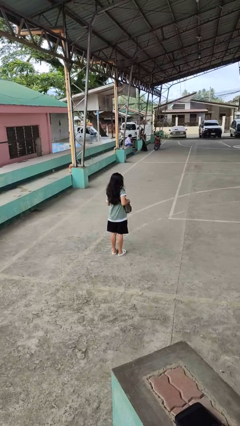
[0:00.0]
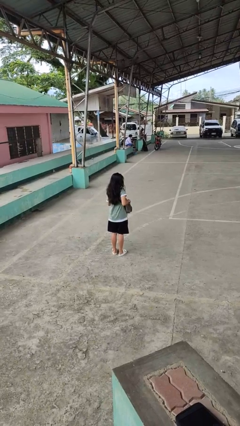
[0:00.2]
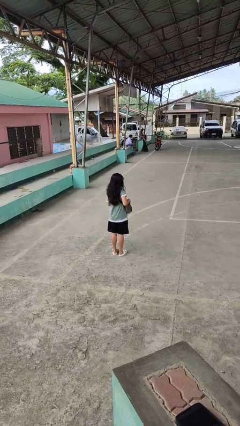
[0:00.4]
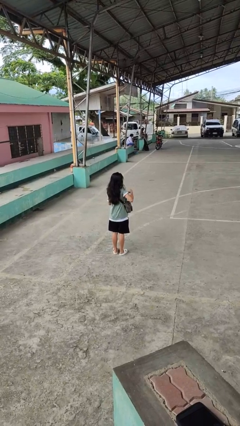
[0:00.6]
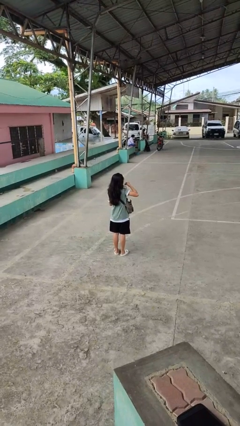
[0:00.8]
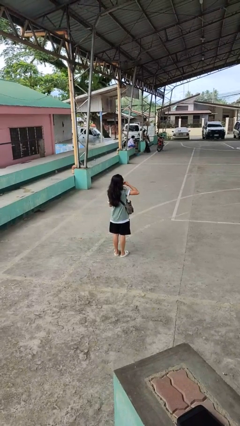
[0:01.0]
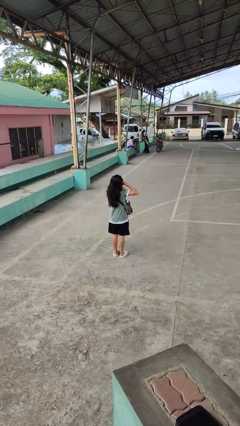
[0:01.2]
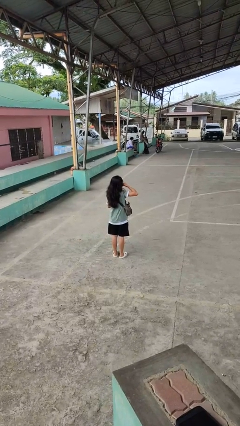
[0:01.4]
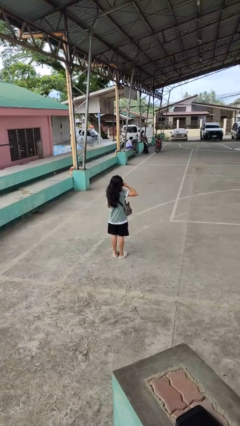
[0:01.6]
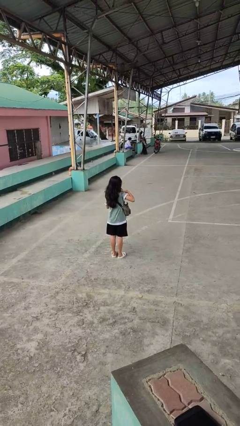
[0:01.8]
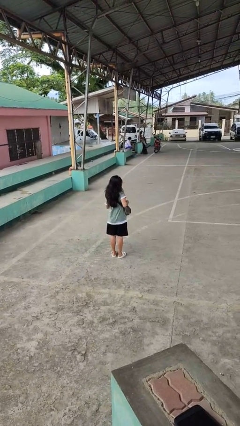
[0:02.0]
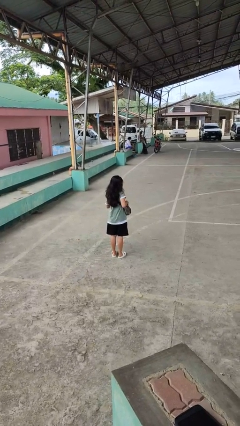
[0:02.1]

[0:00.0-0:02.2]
person eats snack from bag

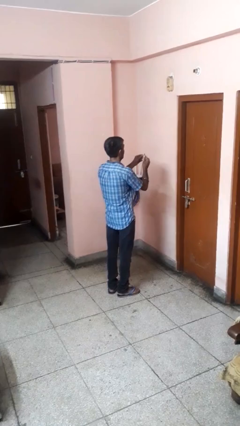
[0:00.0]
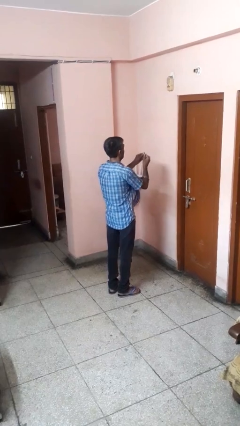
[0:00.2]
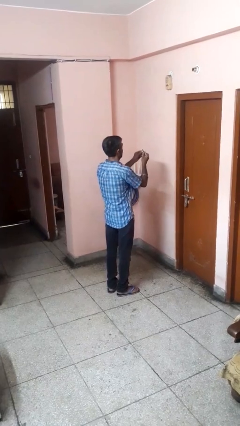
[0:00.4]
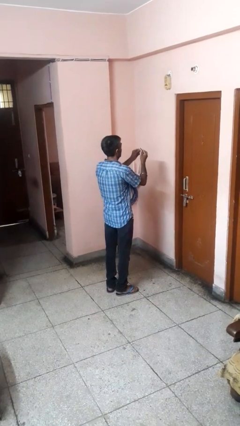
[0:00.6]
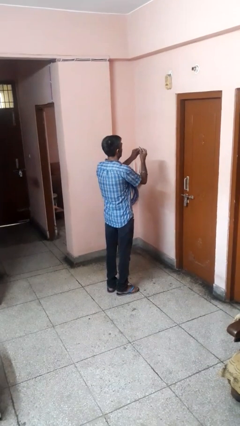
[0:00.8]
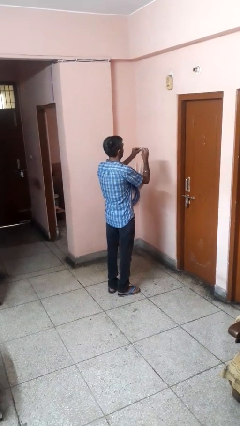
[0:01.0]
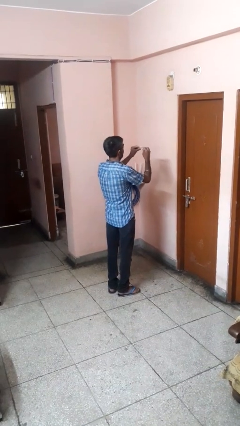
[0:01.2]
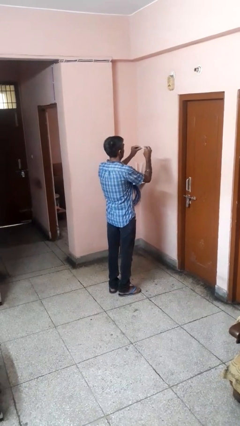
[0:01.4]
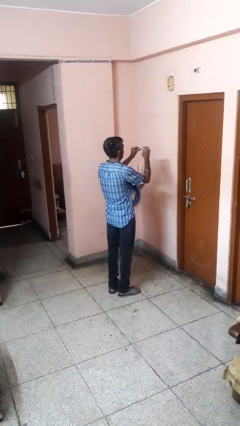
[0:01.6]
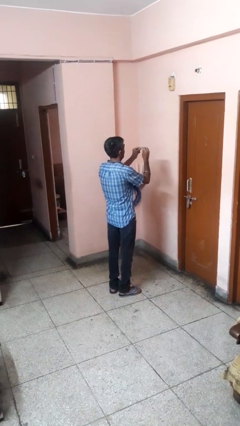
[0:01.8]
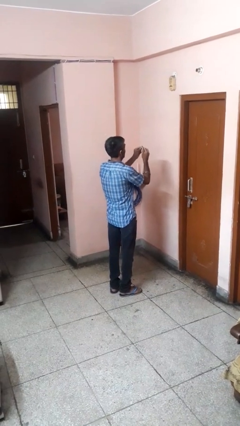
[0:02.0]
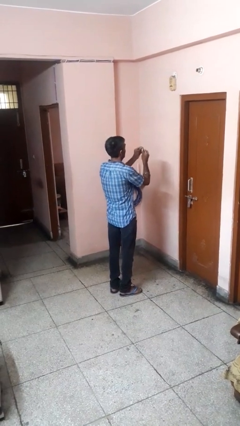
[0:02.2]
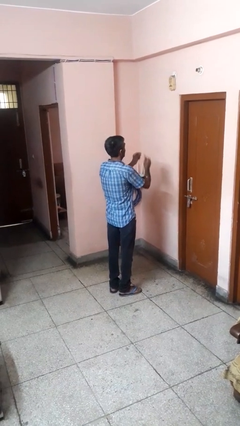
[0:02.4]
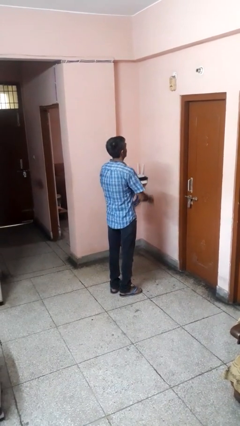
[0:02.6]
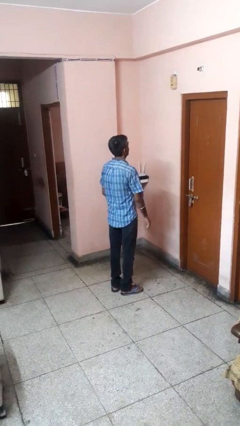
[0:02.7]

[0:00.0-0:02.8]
person files fingernails

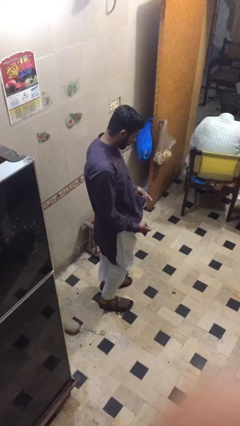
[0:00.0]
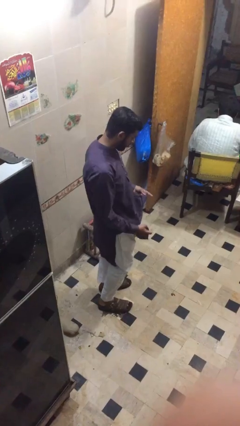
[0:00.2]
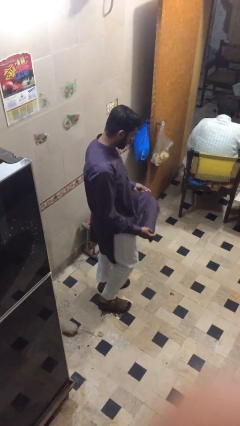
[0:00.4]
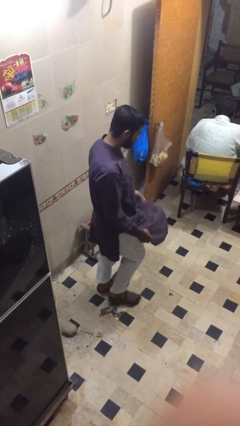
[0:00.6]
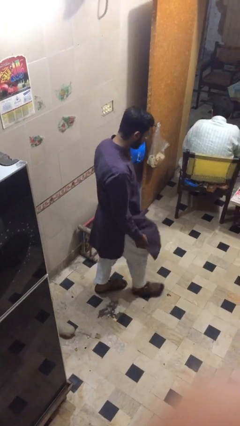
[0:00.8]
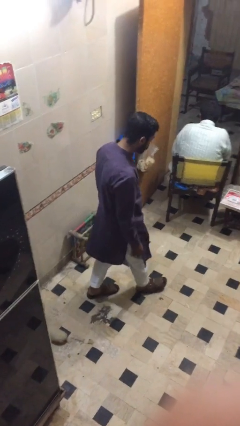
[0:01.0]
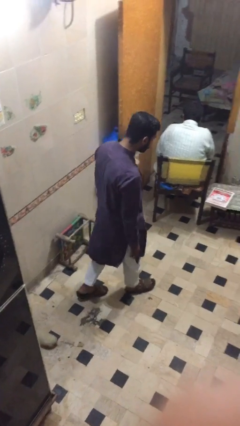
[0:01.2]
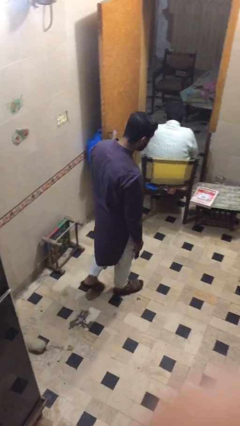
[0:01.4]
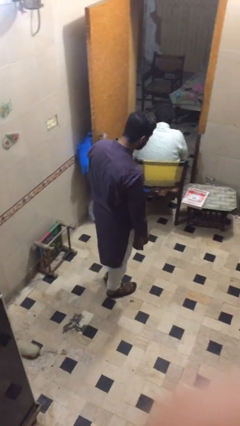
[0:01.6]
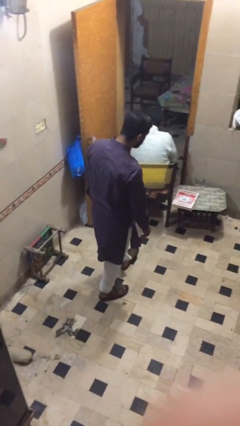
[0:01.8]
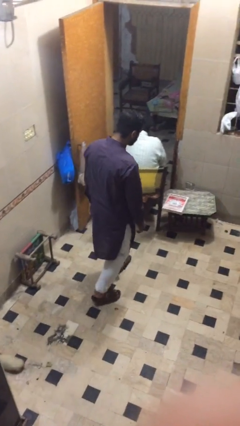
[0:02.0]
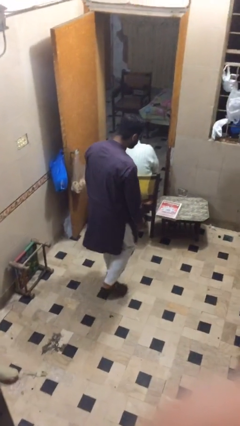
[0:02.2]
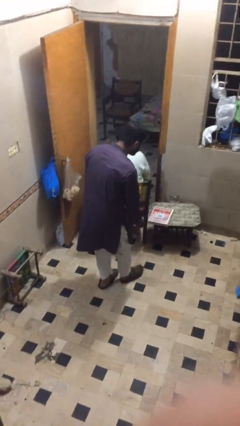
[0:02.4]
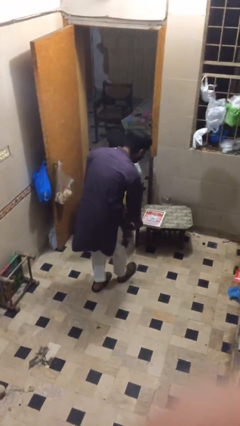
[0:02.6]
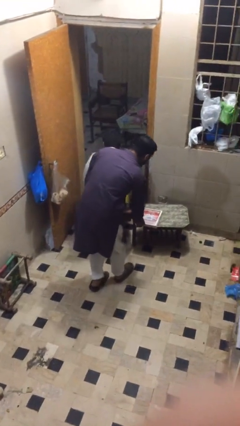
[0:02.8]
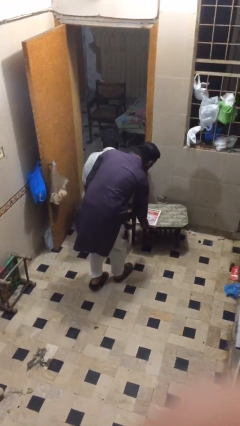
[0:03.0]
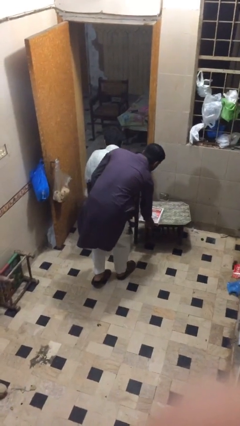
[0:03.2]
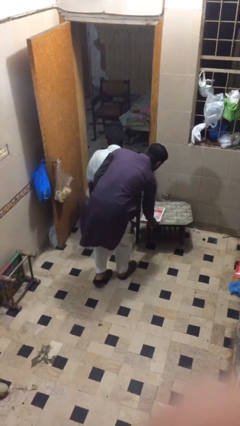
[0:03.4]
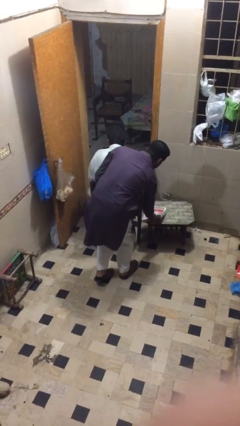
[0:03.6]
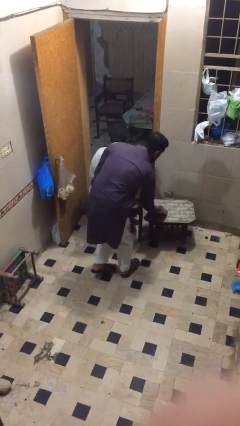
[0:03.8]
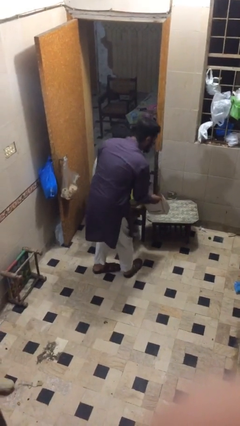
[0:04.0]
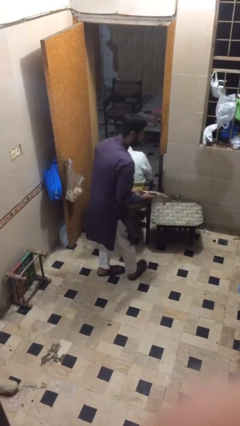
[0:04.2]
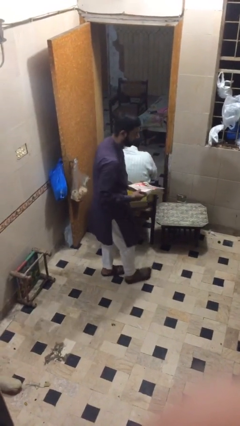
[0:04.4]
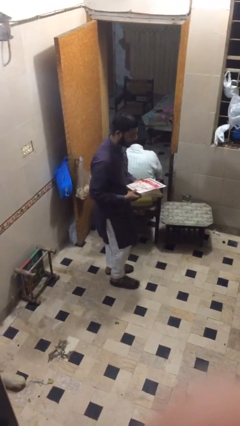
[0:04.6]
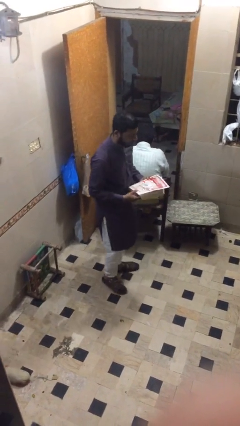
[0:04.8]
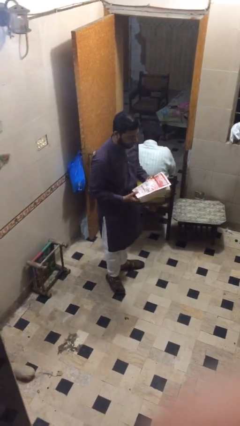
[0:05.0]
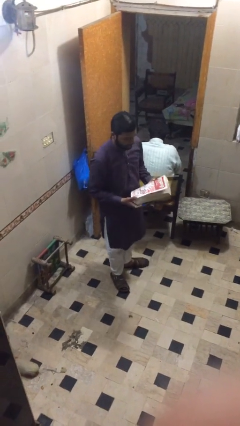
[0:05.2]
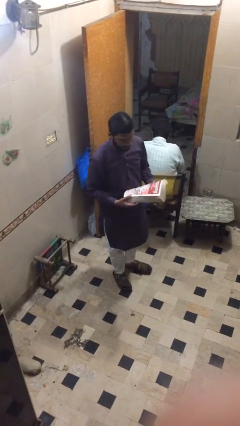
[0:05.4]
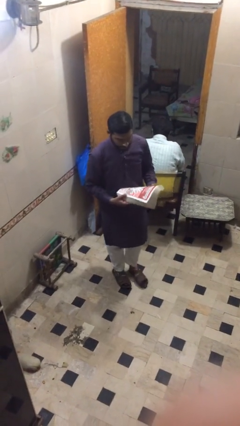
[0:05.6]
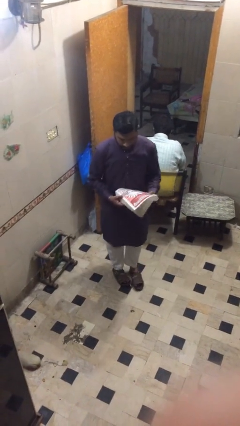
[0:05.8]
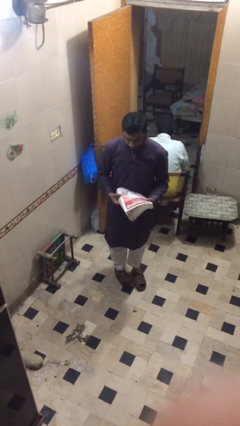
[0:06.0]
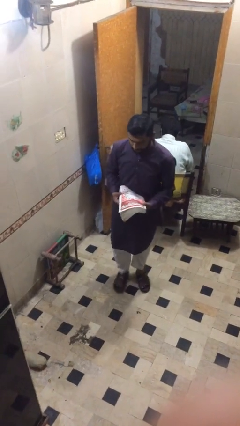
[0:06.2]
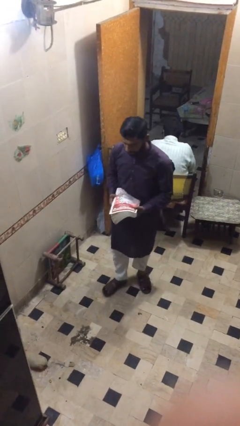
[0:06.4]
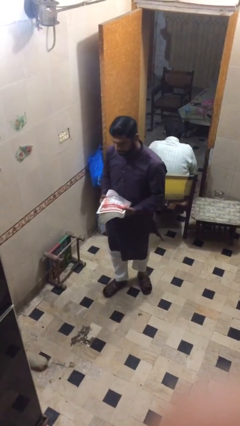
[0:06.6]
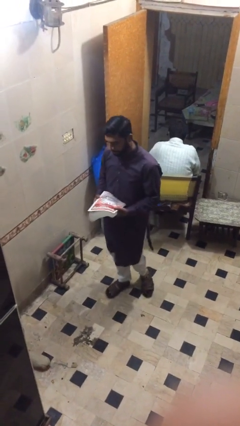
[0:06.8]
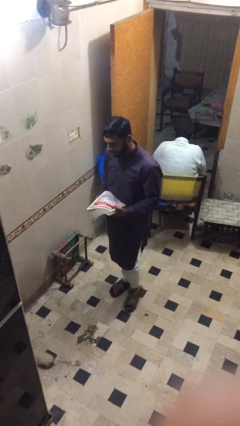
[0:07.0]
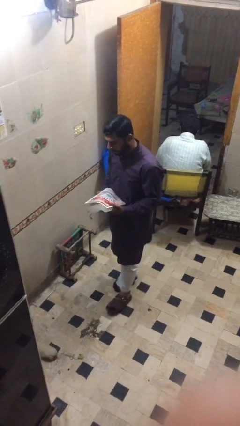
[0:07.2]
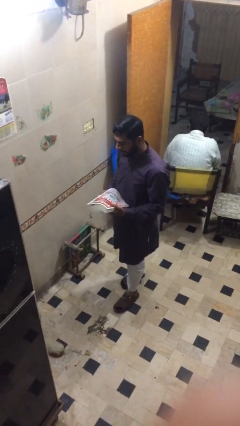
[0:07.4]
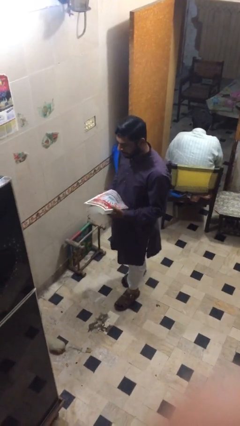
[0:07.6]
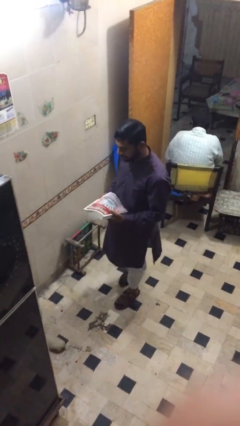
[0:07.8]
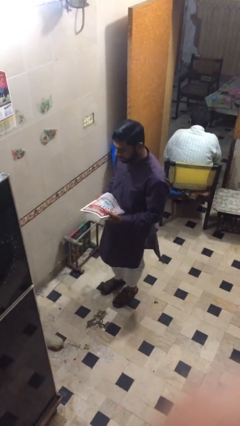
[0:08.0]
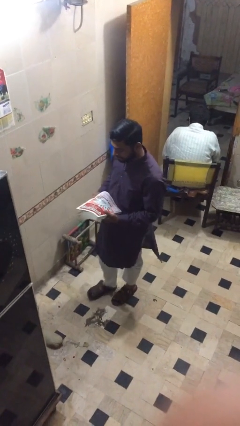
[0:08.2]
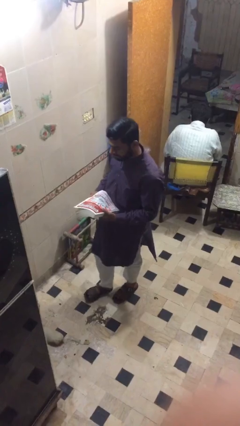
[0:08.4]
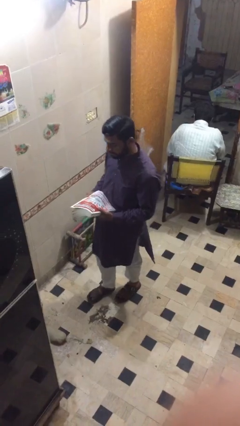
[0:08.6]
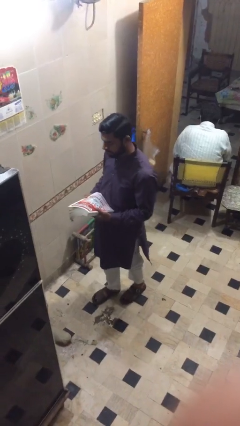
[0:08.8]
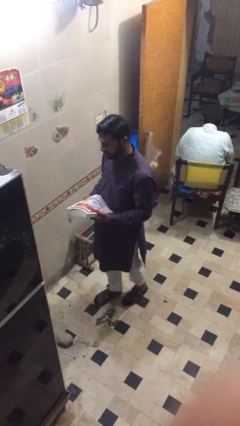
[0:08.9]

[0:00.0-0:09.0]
person steals object from person

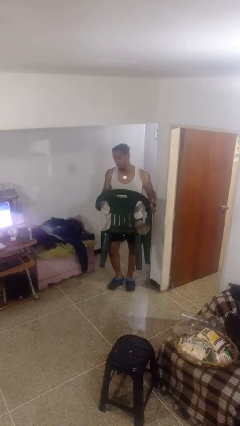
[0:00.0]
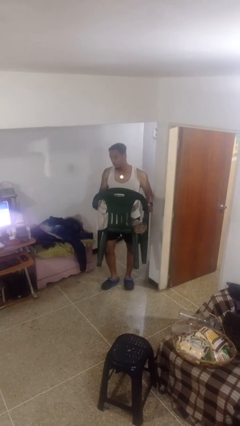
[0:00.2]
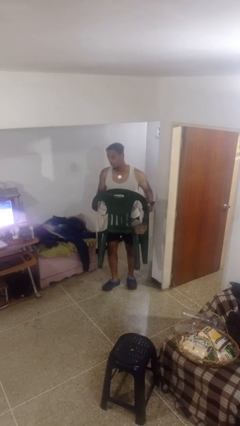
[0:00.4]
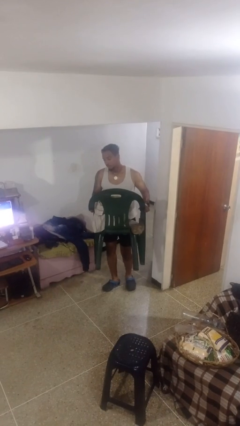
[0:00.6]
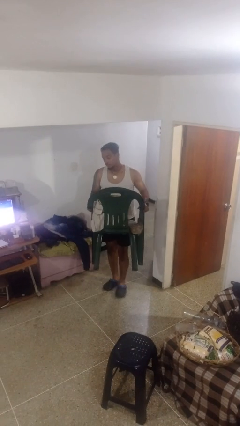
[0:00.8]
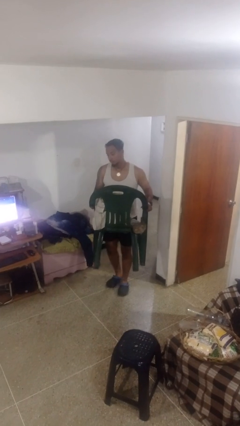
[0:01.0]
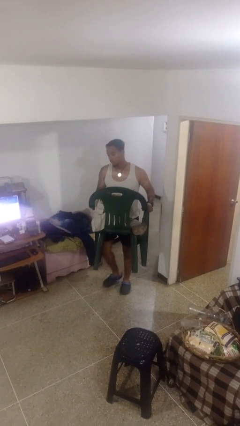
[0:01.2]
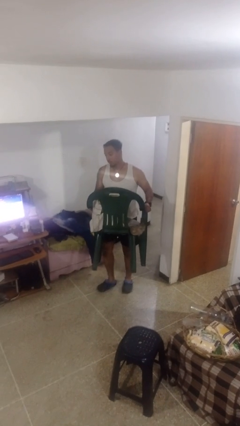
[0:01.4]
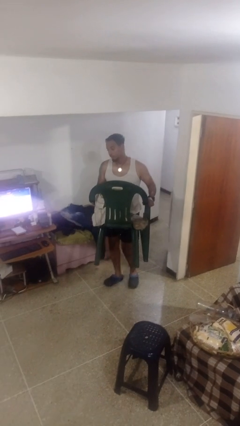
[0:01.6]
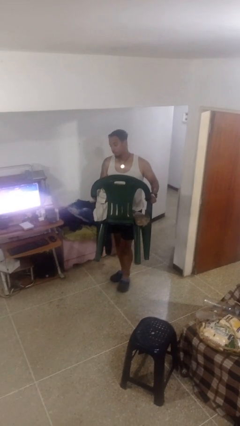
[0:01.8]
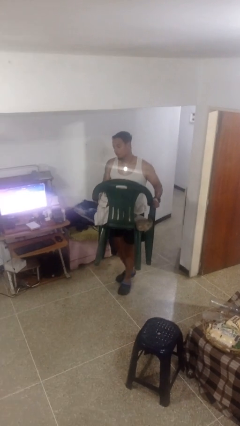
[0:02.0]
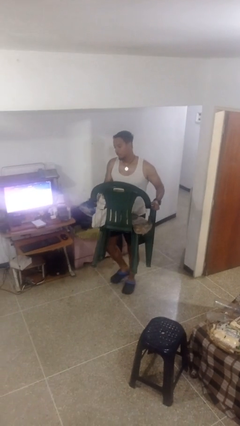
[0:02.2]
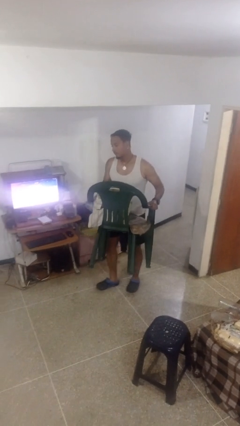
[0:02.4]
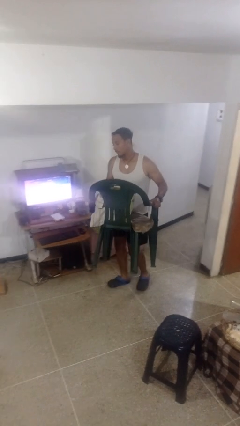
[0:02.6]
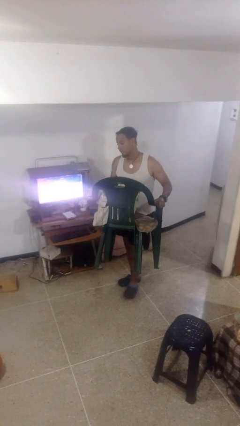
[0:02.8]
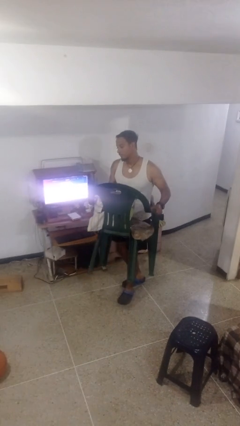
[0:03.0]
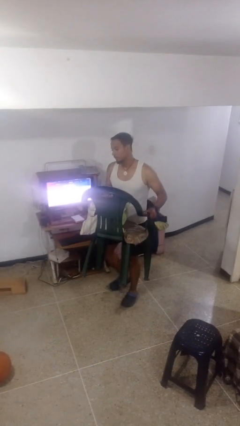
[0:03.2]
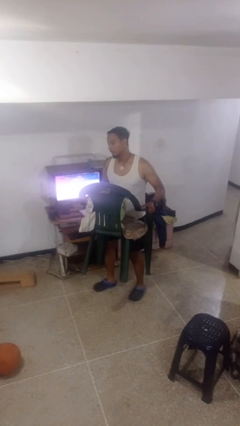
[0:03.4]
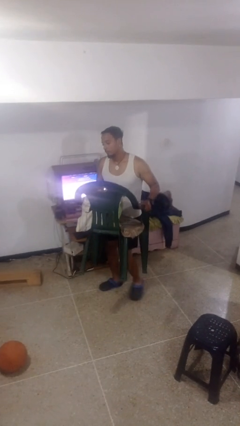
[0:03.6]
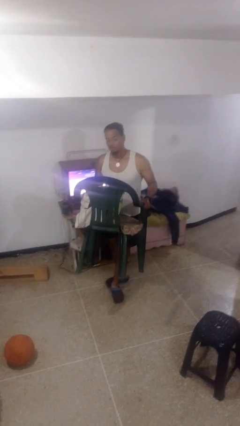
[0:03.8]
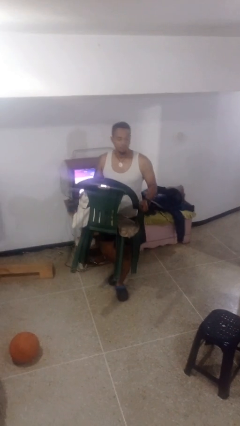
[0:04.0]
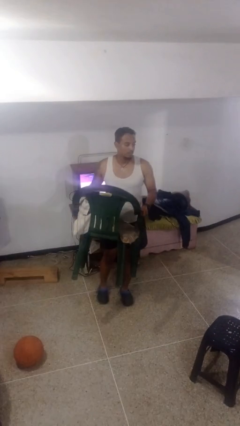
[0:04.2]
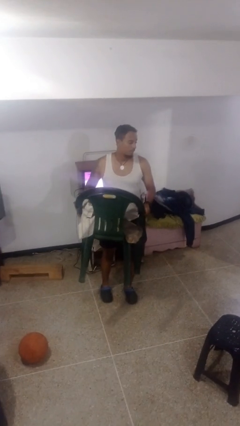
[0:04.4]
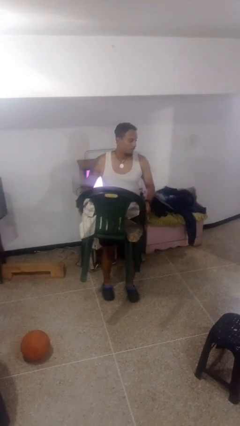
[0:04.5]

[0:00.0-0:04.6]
person carries furniture
